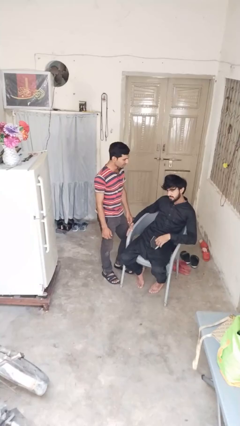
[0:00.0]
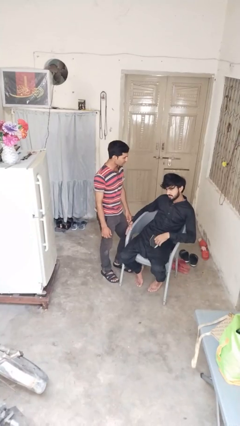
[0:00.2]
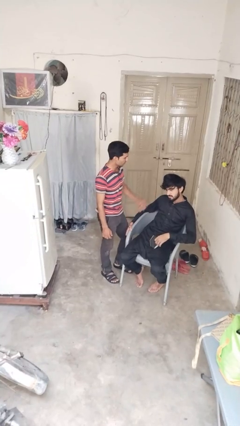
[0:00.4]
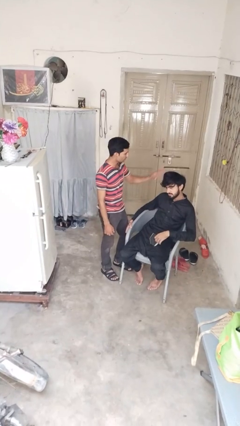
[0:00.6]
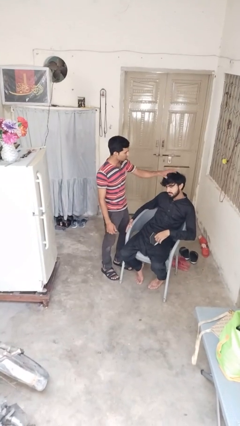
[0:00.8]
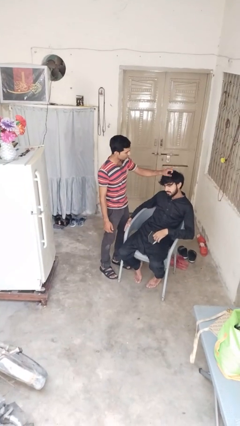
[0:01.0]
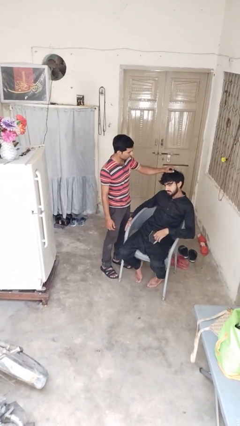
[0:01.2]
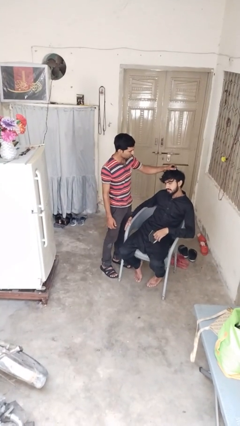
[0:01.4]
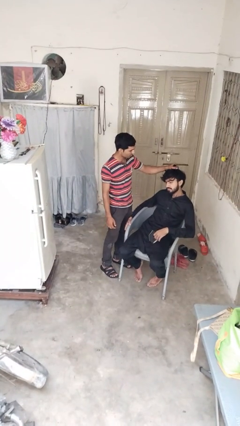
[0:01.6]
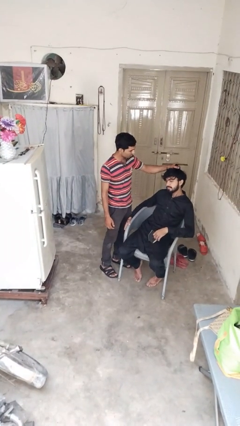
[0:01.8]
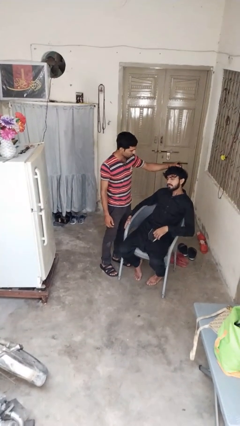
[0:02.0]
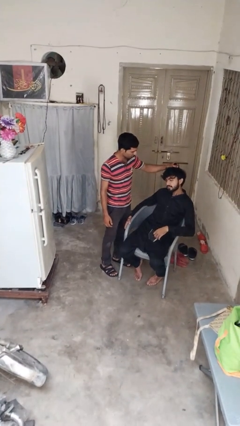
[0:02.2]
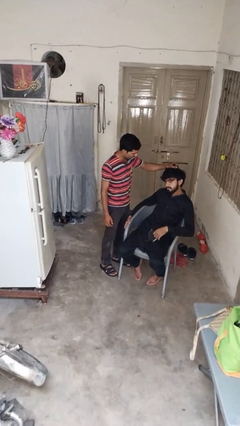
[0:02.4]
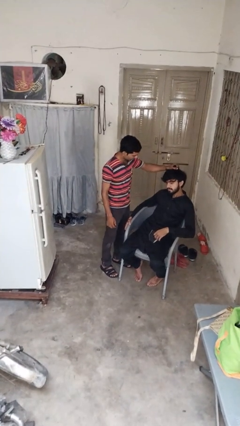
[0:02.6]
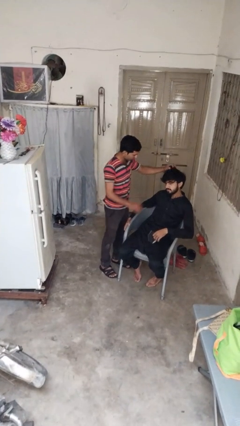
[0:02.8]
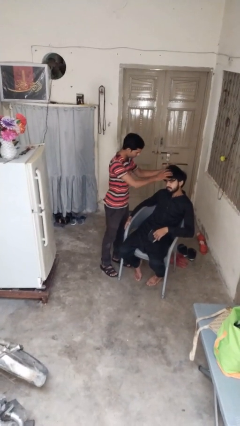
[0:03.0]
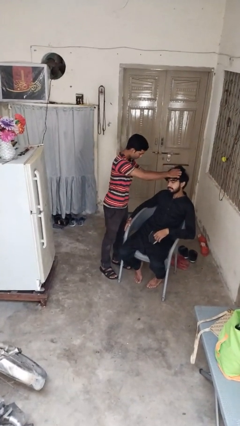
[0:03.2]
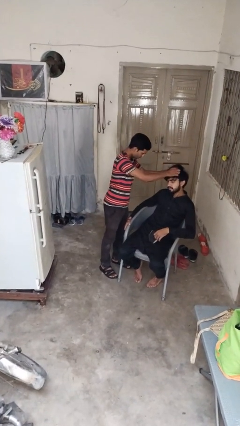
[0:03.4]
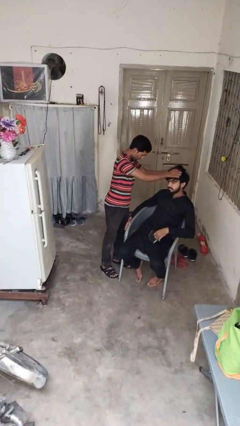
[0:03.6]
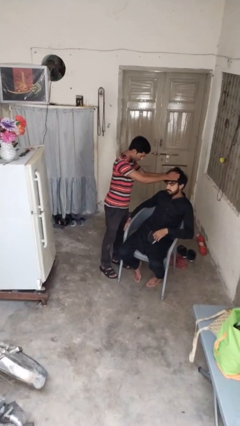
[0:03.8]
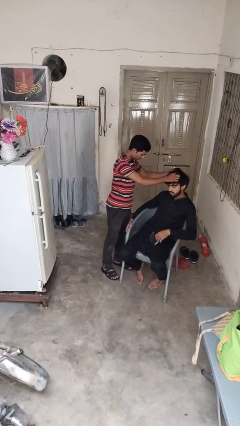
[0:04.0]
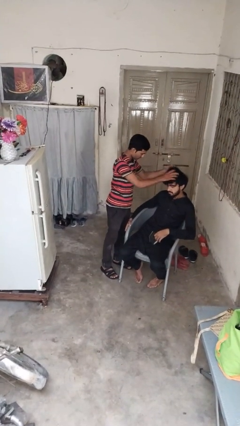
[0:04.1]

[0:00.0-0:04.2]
person grabs person by hair

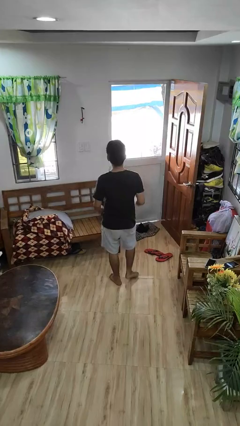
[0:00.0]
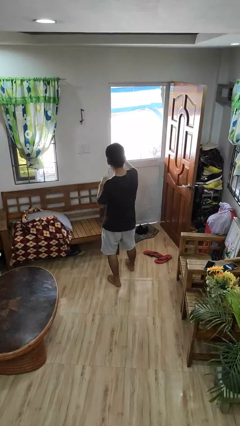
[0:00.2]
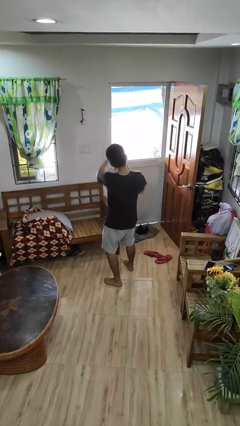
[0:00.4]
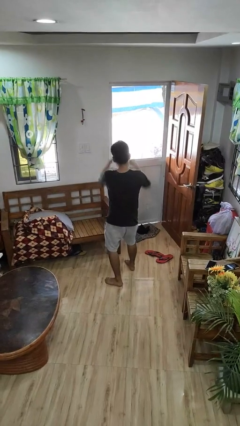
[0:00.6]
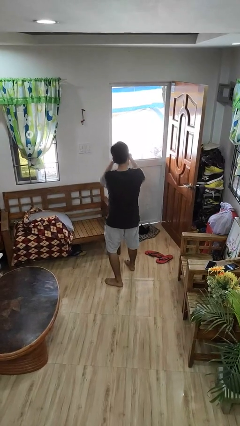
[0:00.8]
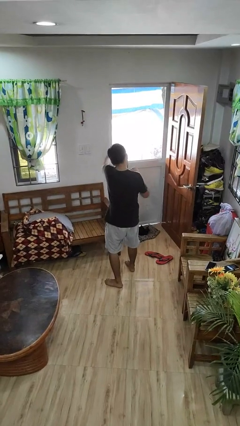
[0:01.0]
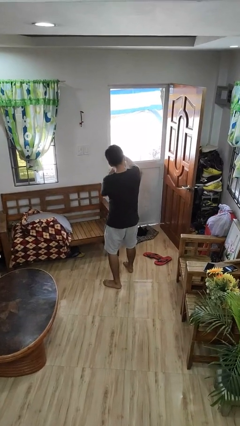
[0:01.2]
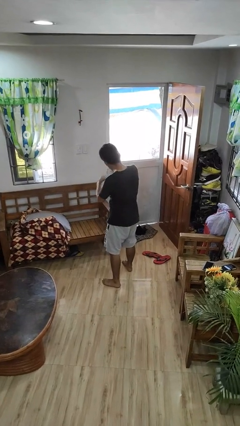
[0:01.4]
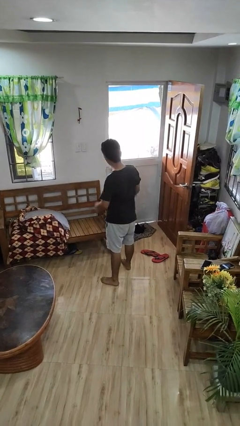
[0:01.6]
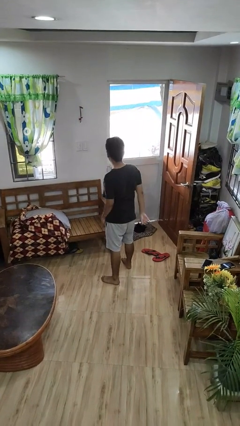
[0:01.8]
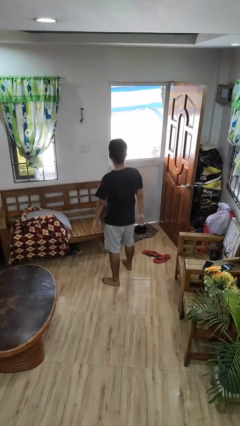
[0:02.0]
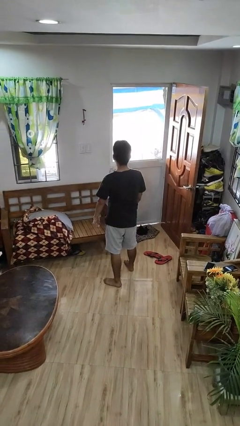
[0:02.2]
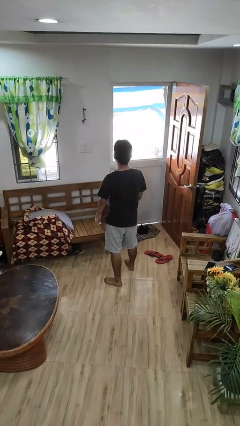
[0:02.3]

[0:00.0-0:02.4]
person punches

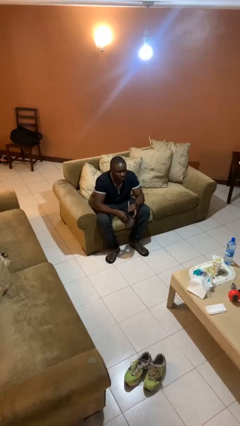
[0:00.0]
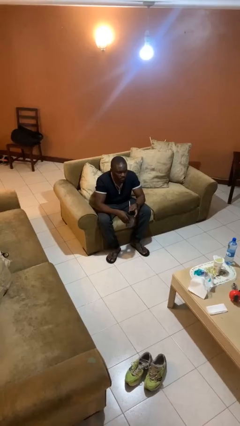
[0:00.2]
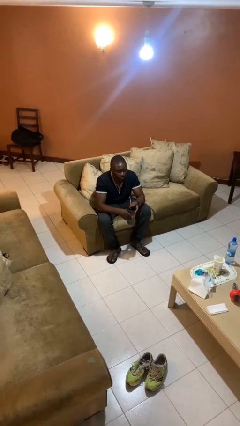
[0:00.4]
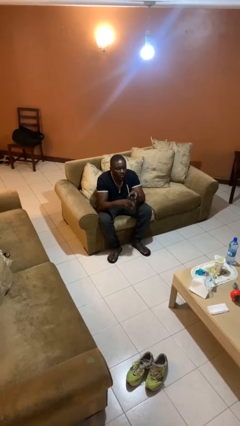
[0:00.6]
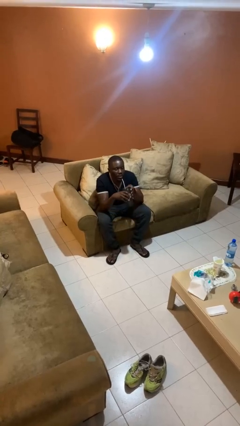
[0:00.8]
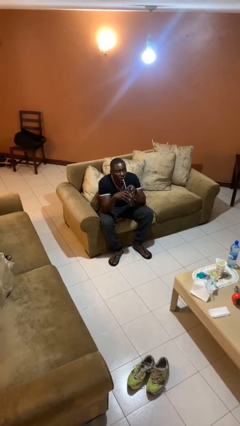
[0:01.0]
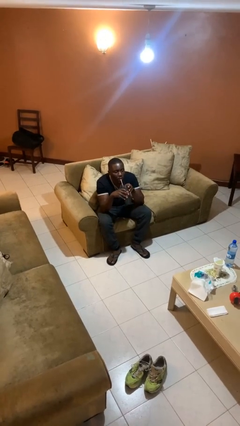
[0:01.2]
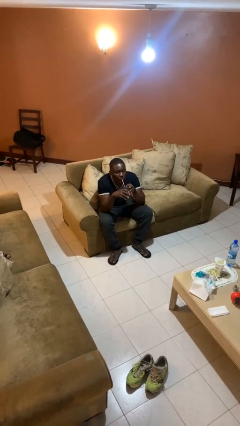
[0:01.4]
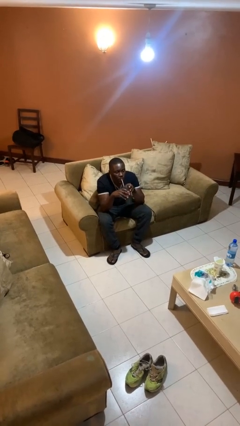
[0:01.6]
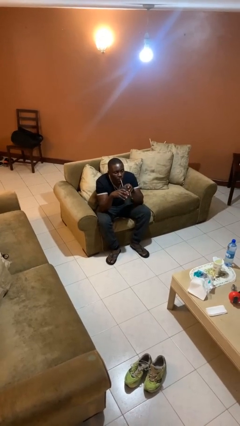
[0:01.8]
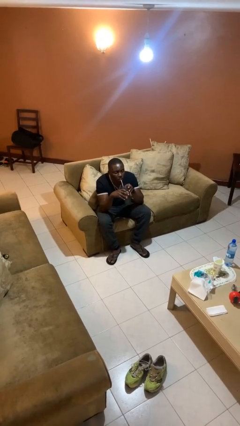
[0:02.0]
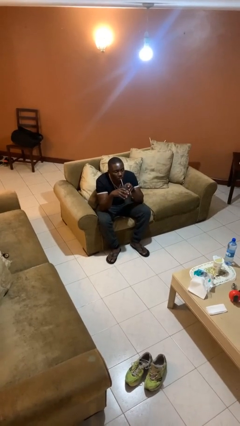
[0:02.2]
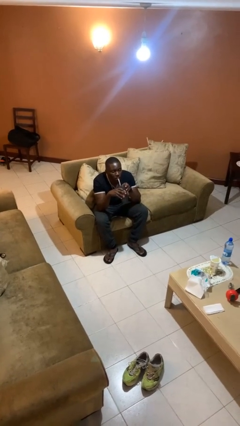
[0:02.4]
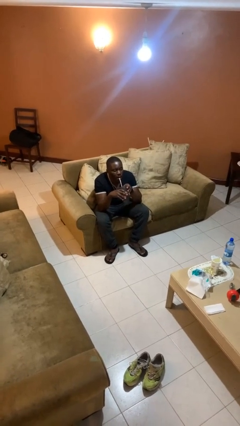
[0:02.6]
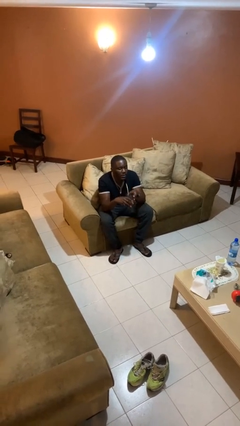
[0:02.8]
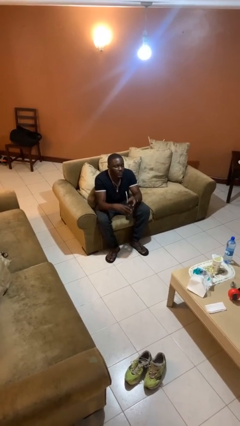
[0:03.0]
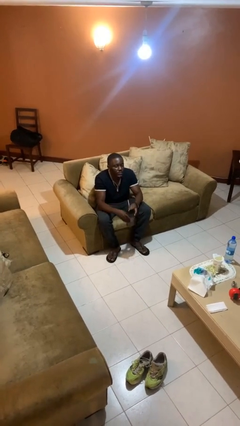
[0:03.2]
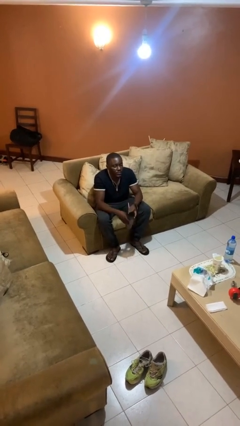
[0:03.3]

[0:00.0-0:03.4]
person drinks from straw

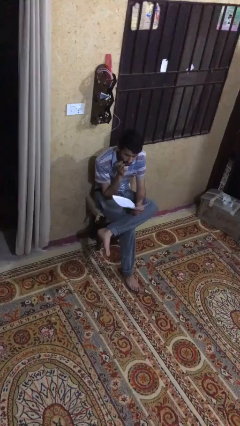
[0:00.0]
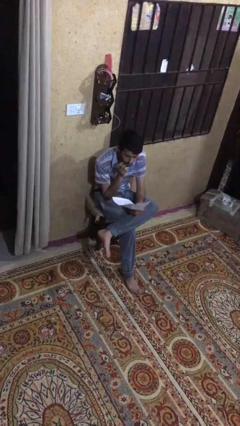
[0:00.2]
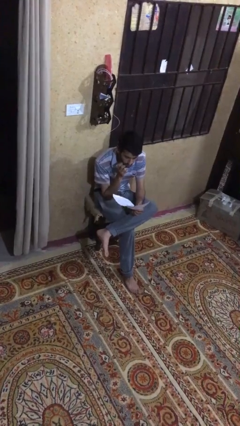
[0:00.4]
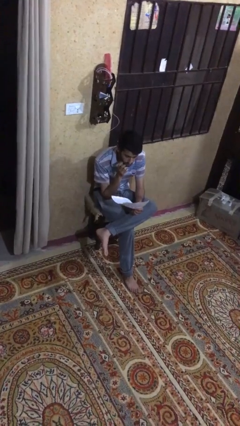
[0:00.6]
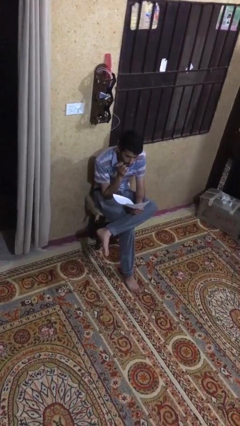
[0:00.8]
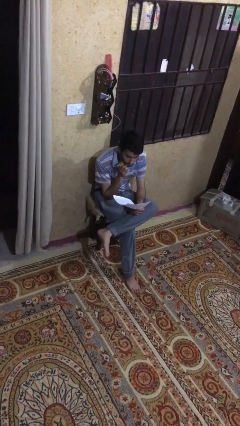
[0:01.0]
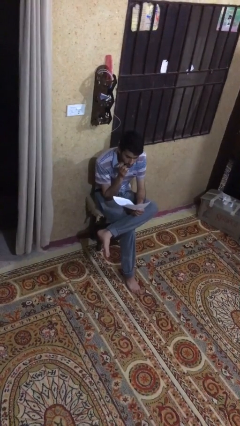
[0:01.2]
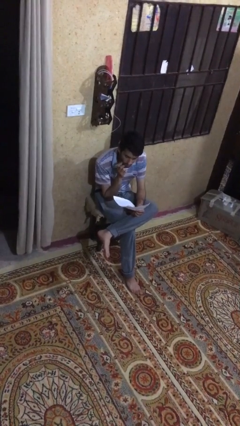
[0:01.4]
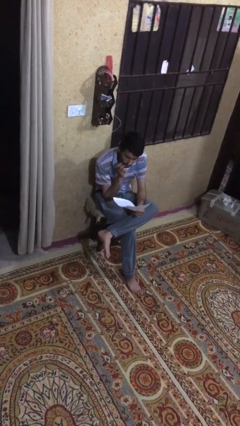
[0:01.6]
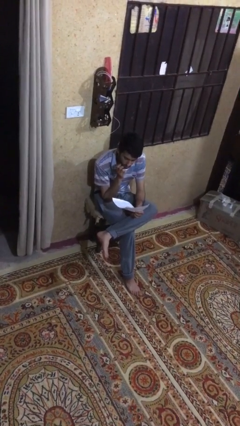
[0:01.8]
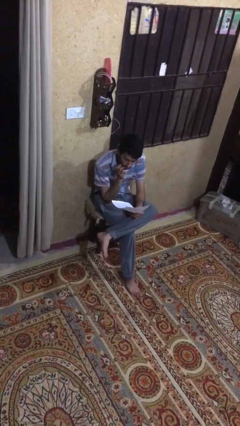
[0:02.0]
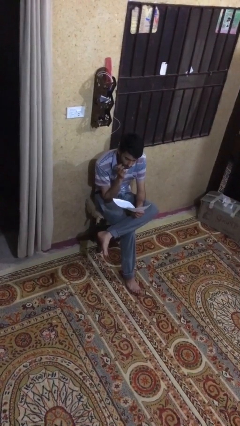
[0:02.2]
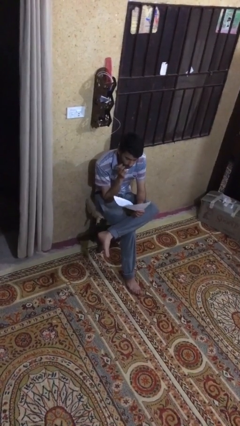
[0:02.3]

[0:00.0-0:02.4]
person reads document

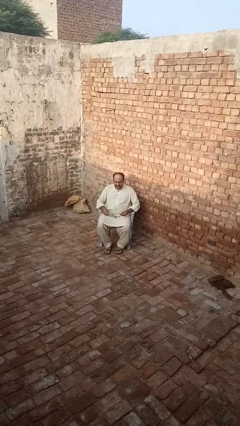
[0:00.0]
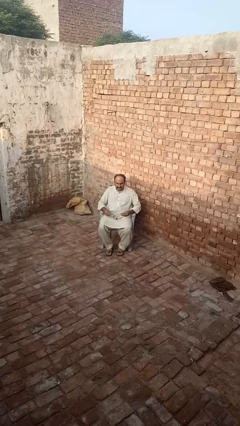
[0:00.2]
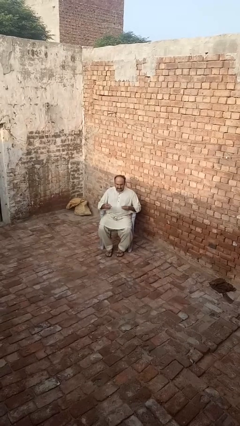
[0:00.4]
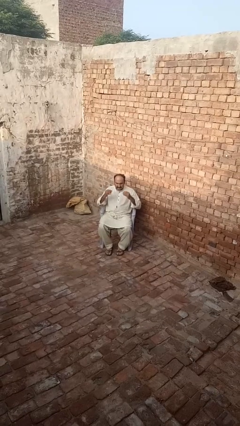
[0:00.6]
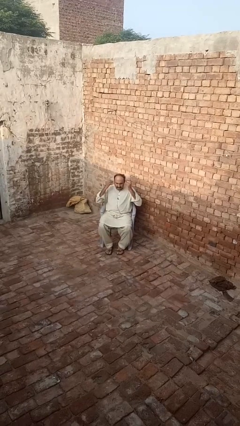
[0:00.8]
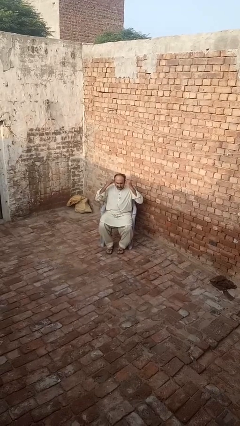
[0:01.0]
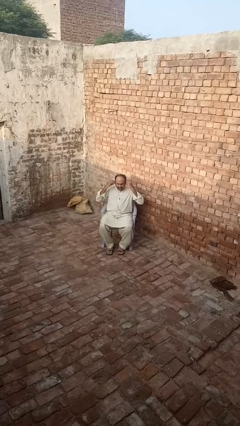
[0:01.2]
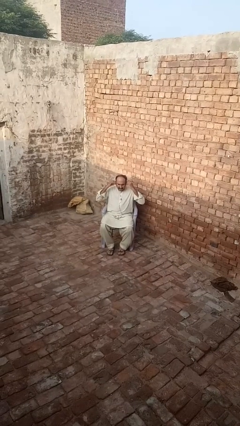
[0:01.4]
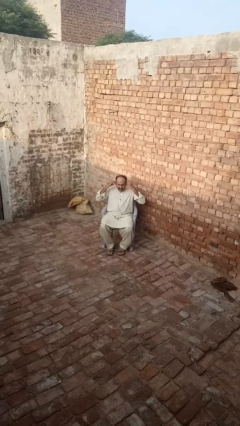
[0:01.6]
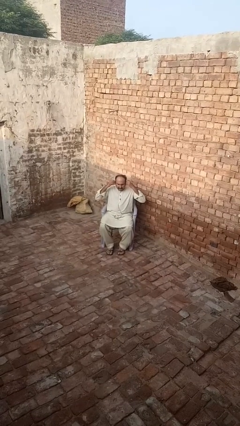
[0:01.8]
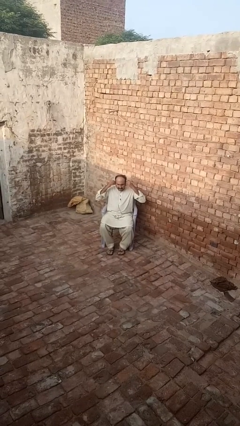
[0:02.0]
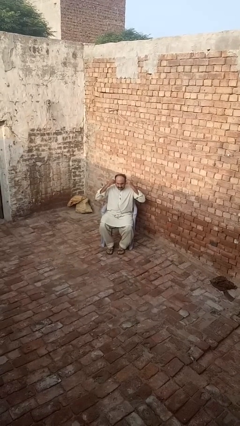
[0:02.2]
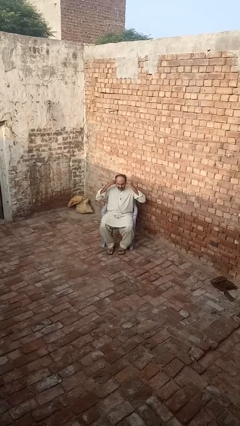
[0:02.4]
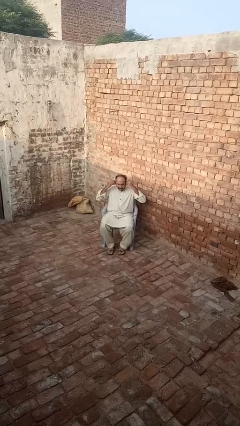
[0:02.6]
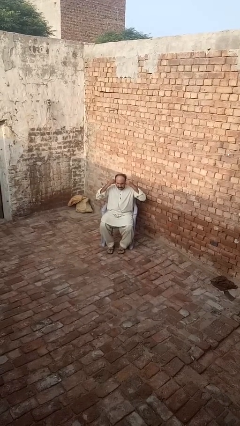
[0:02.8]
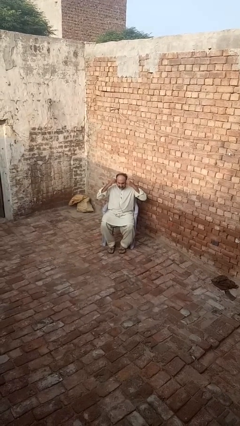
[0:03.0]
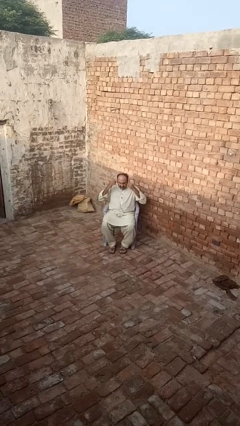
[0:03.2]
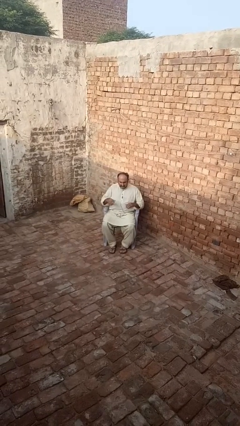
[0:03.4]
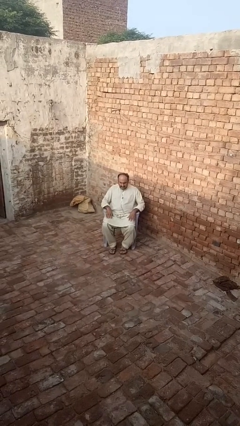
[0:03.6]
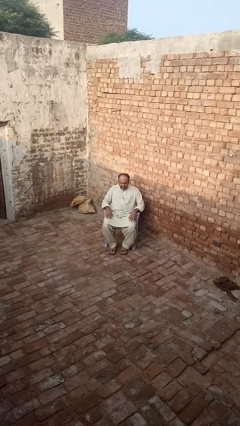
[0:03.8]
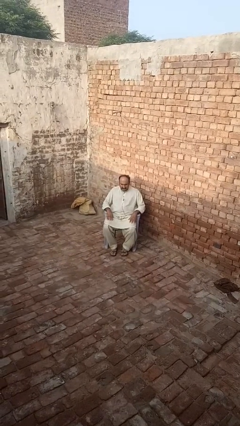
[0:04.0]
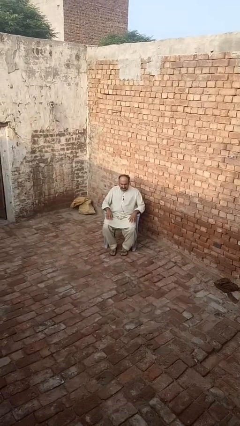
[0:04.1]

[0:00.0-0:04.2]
person puts on headphones

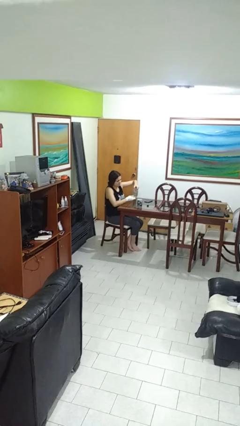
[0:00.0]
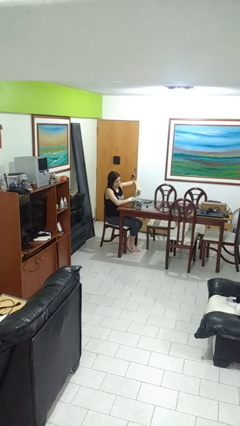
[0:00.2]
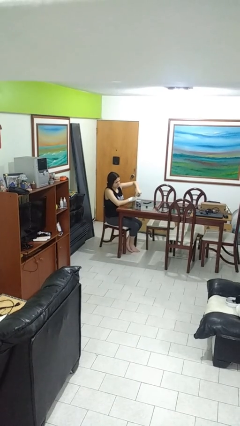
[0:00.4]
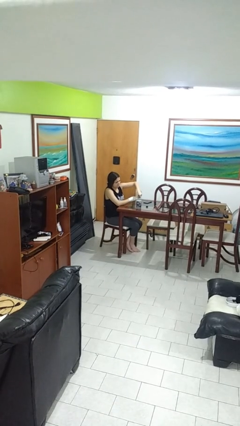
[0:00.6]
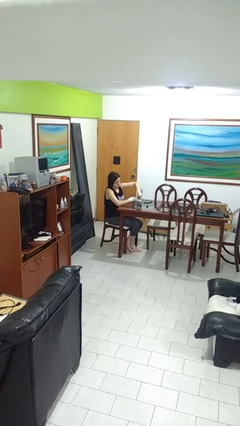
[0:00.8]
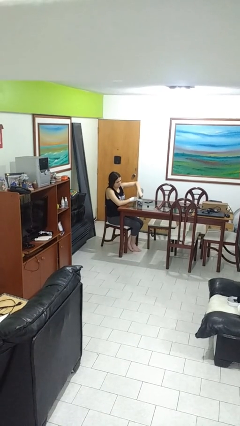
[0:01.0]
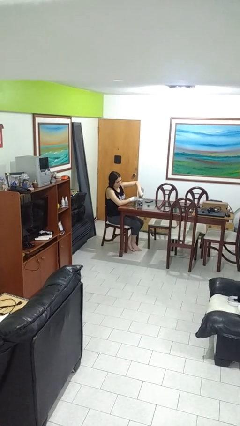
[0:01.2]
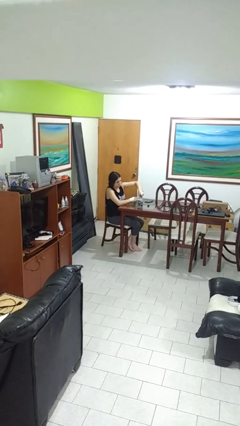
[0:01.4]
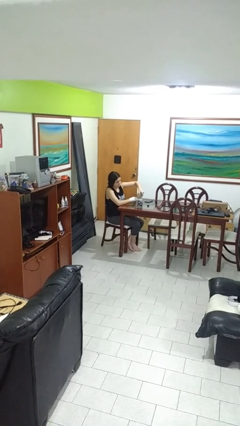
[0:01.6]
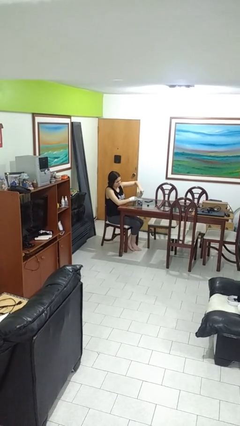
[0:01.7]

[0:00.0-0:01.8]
person pours liquid into cup
